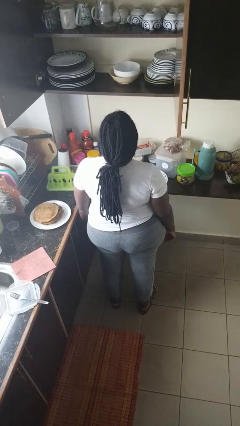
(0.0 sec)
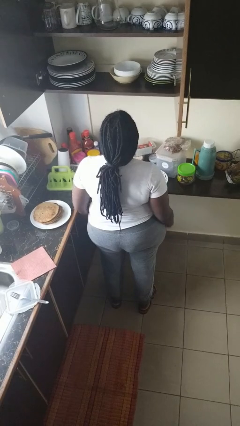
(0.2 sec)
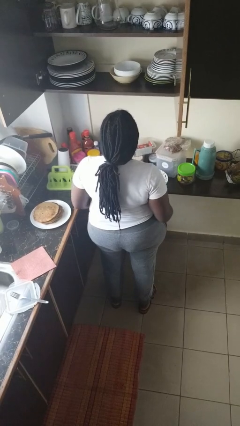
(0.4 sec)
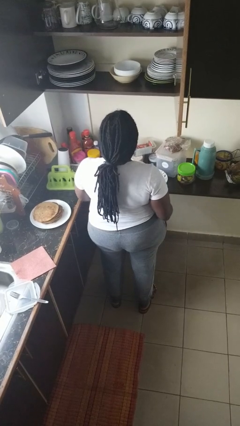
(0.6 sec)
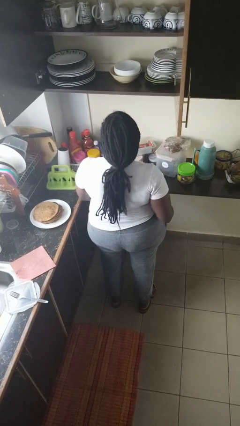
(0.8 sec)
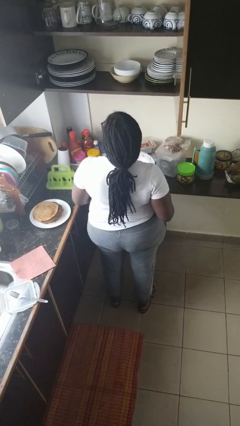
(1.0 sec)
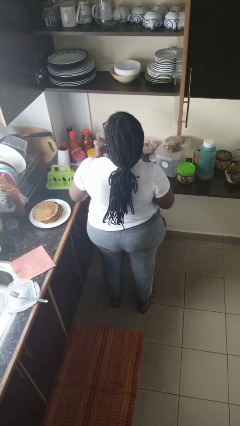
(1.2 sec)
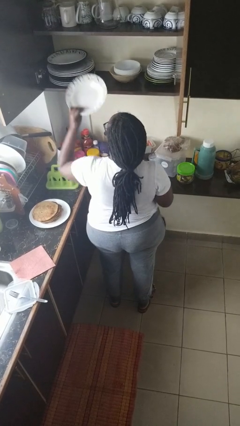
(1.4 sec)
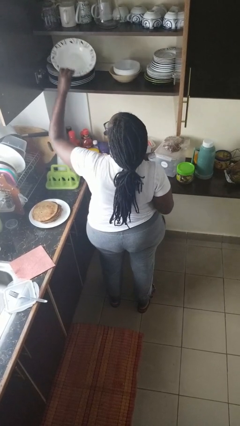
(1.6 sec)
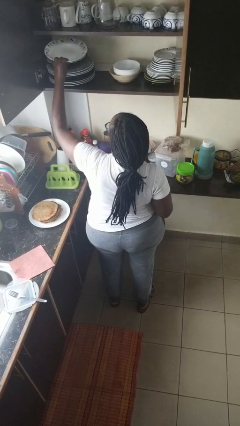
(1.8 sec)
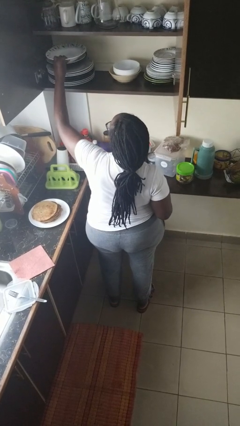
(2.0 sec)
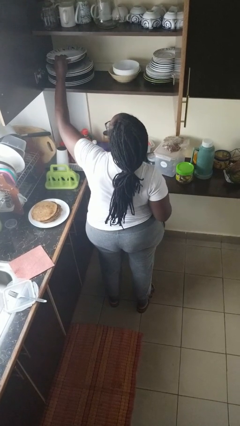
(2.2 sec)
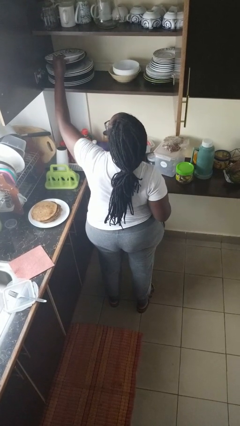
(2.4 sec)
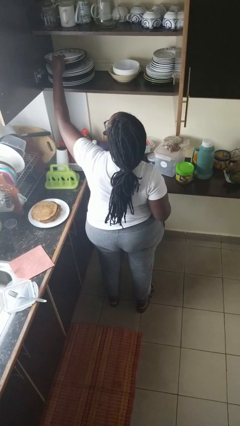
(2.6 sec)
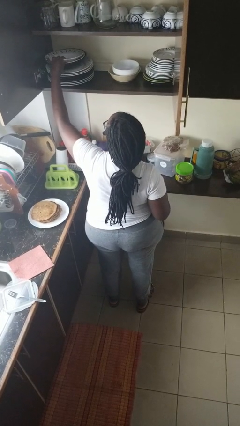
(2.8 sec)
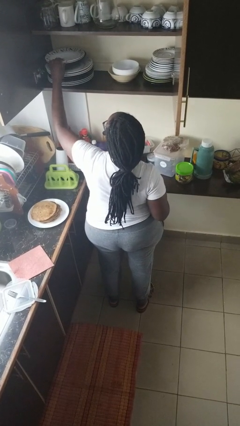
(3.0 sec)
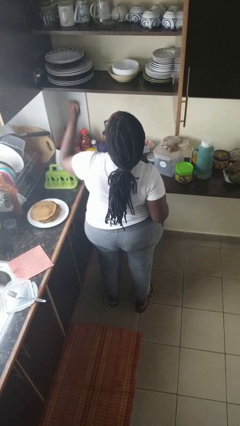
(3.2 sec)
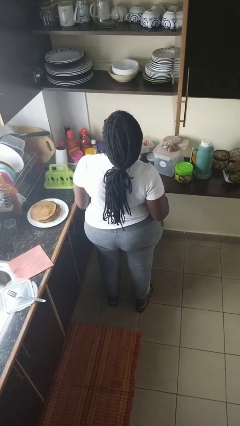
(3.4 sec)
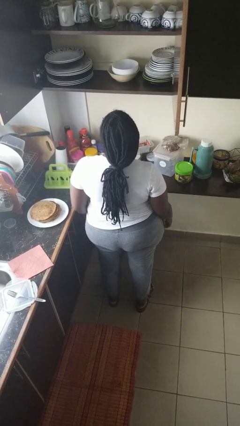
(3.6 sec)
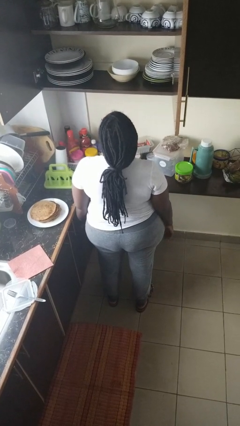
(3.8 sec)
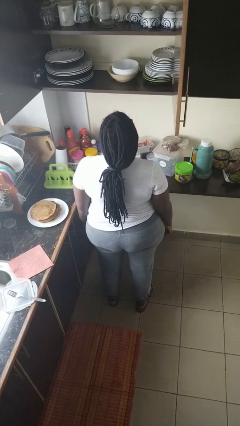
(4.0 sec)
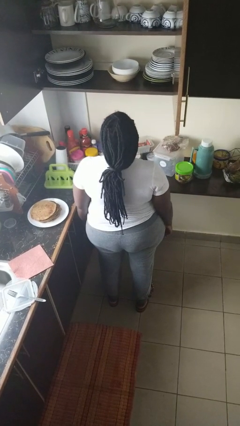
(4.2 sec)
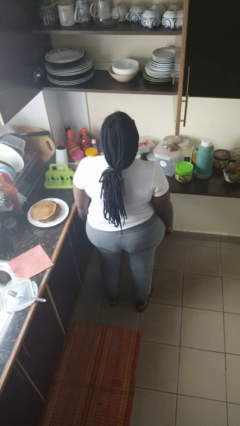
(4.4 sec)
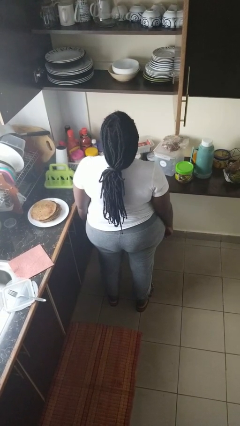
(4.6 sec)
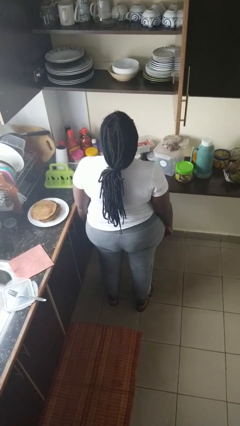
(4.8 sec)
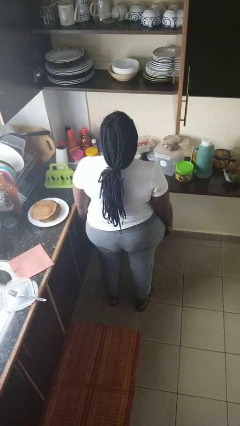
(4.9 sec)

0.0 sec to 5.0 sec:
person puts object in cabinet

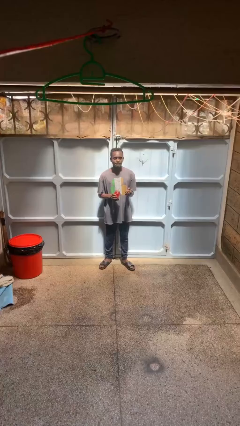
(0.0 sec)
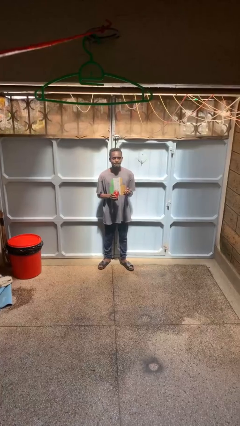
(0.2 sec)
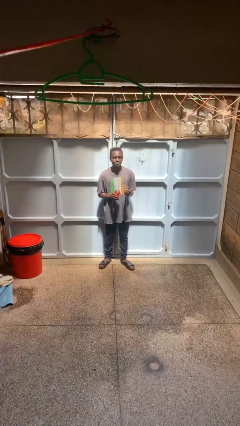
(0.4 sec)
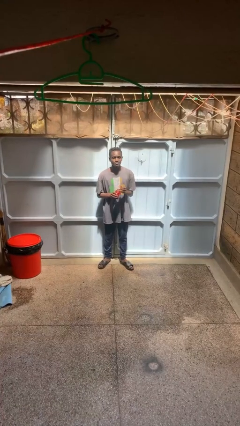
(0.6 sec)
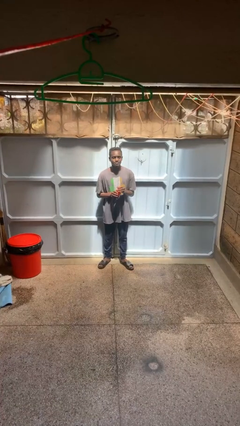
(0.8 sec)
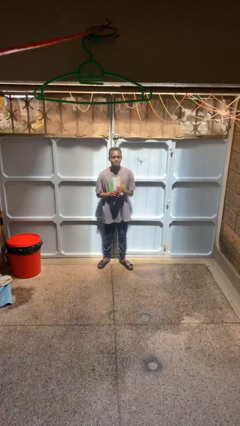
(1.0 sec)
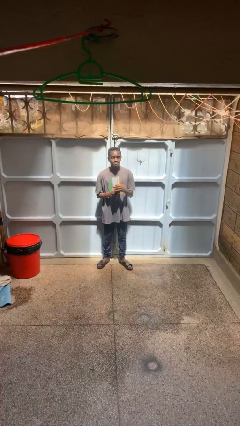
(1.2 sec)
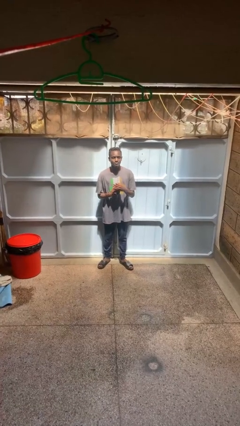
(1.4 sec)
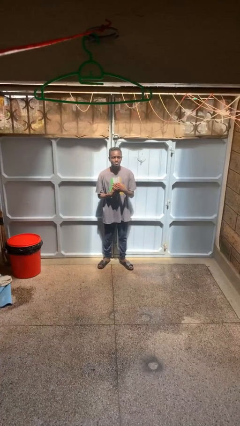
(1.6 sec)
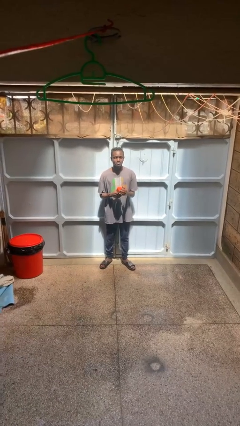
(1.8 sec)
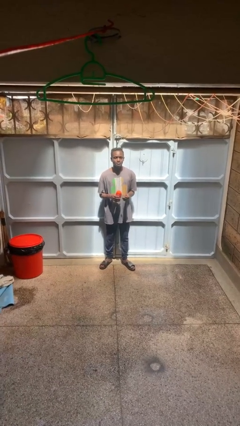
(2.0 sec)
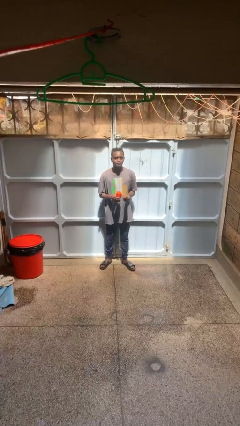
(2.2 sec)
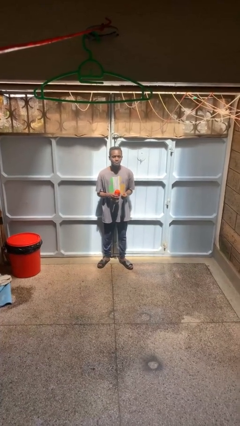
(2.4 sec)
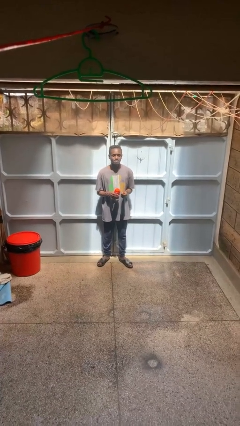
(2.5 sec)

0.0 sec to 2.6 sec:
person closes jar

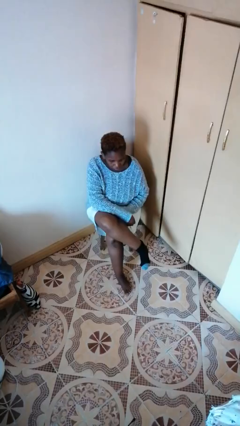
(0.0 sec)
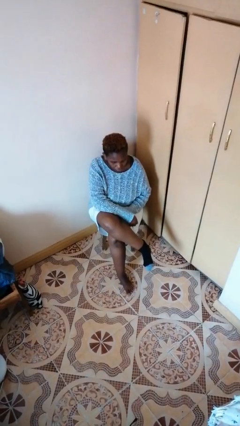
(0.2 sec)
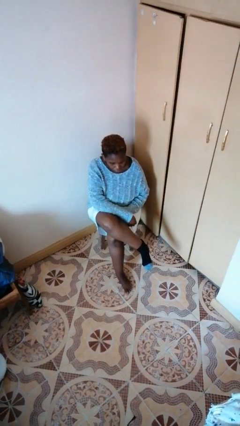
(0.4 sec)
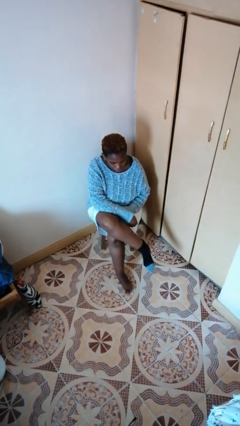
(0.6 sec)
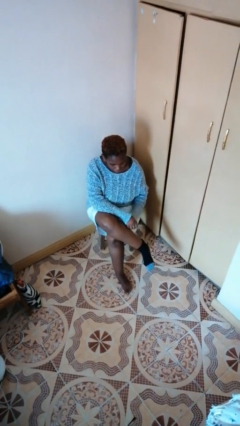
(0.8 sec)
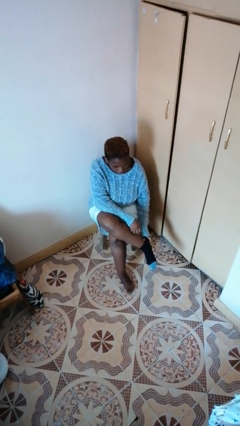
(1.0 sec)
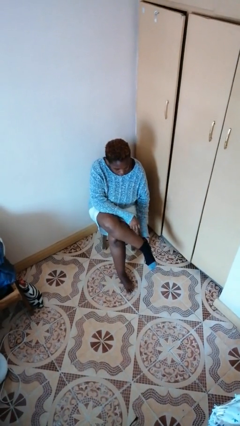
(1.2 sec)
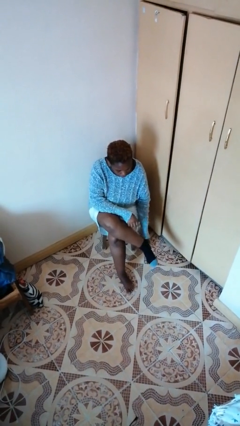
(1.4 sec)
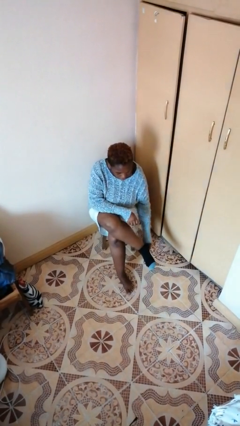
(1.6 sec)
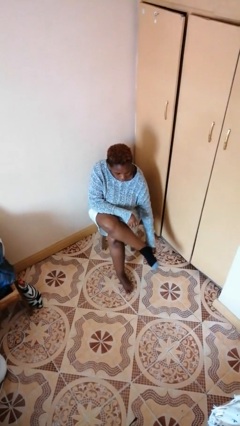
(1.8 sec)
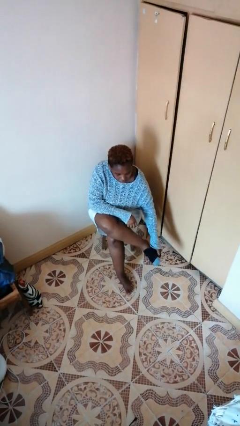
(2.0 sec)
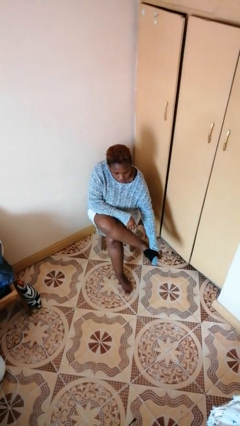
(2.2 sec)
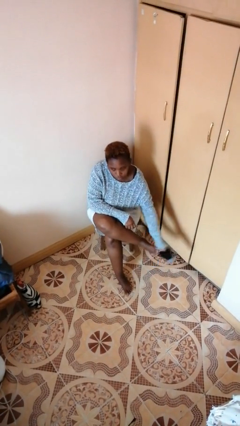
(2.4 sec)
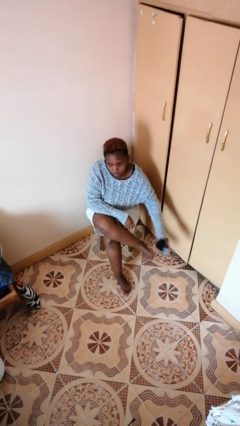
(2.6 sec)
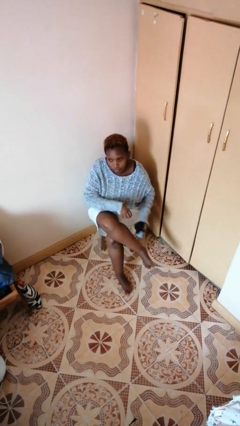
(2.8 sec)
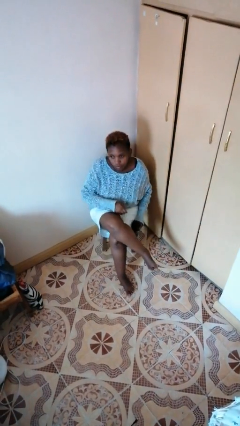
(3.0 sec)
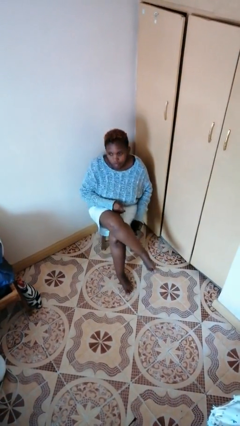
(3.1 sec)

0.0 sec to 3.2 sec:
person takes off socks

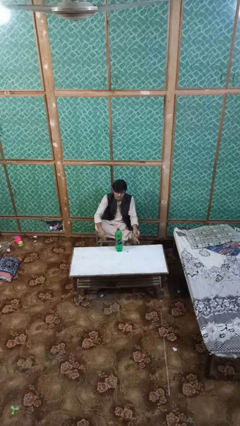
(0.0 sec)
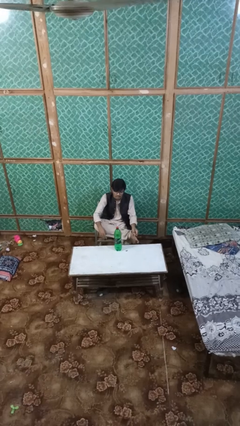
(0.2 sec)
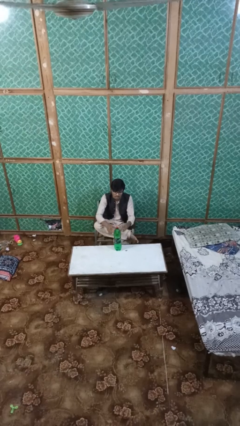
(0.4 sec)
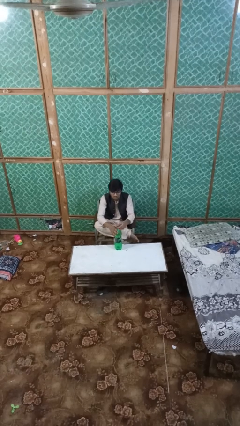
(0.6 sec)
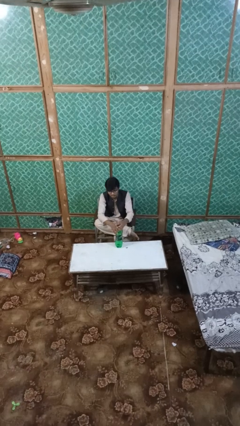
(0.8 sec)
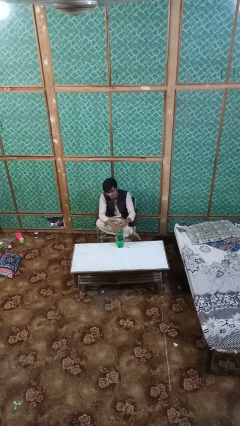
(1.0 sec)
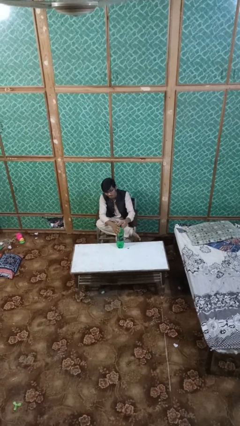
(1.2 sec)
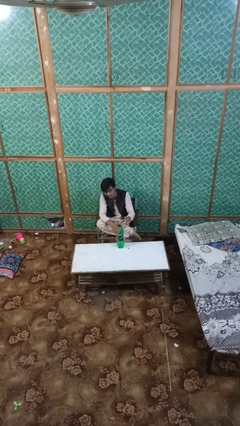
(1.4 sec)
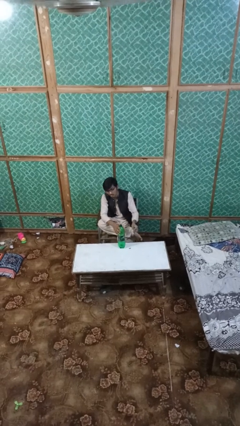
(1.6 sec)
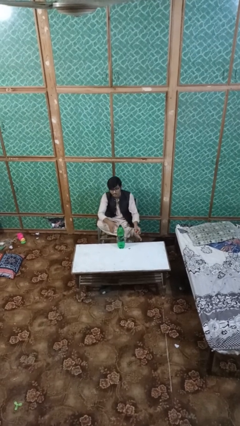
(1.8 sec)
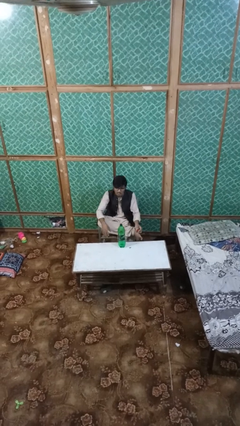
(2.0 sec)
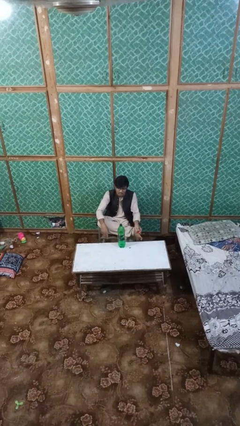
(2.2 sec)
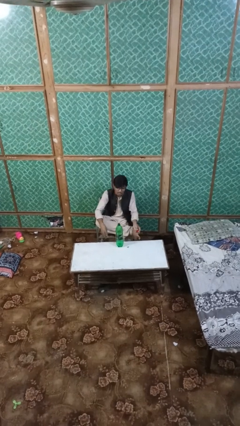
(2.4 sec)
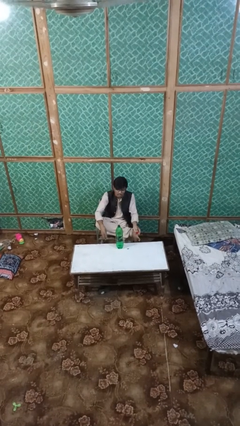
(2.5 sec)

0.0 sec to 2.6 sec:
person unscrews lid from bottle

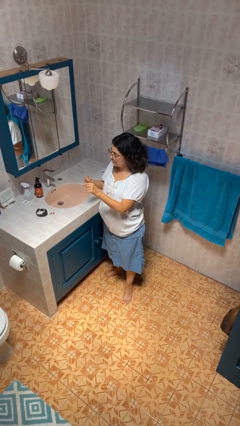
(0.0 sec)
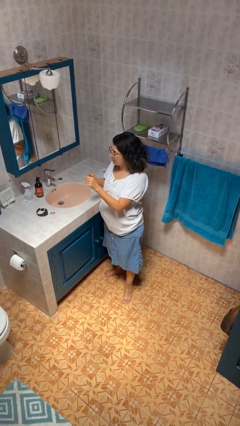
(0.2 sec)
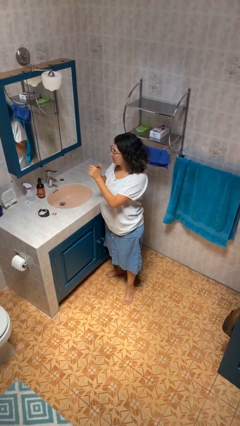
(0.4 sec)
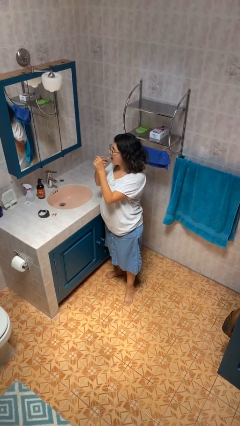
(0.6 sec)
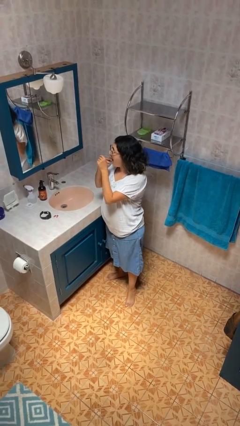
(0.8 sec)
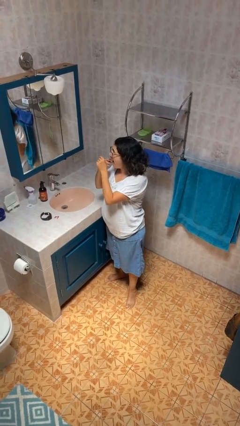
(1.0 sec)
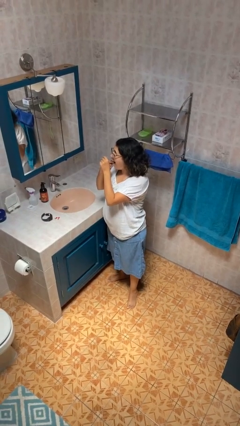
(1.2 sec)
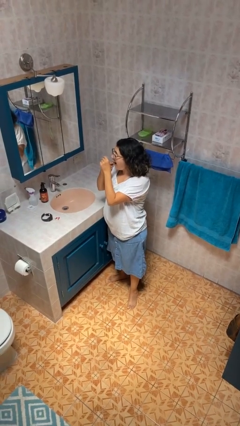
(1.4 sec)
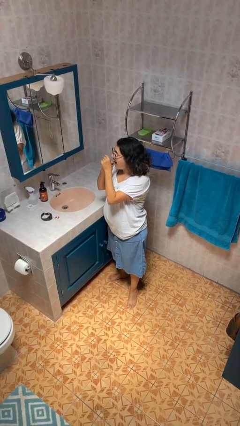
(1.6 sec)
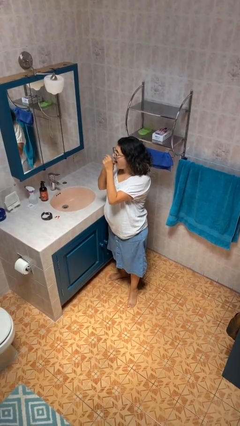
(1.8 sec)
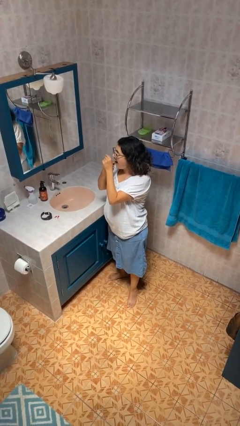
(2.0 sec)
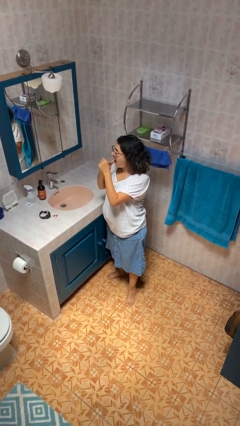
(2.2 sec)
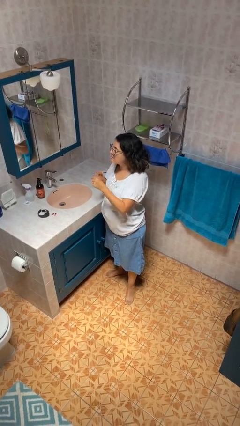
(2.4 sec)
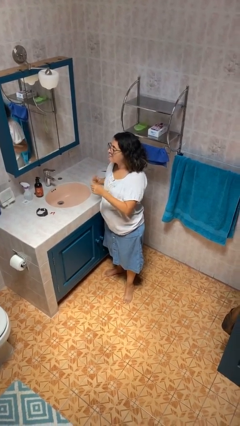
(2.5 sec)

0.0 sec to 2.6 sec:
person flosses

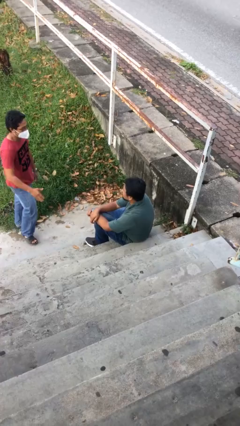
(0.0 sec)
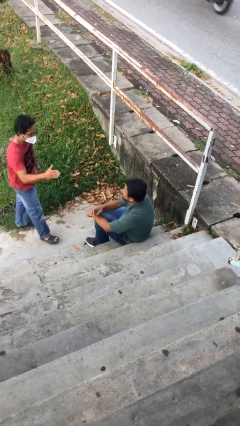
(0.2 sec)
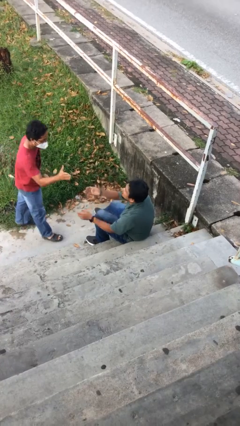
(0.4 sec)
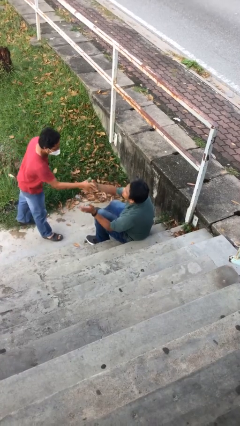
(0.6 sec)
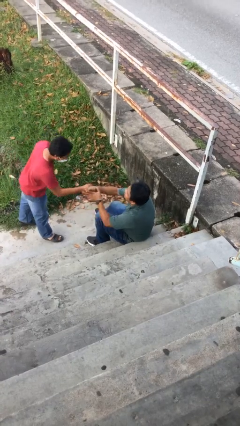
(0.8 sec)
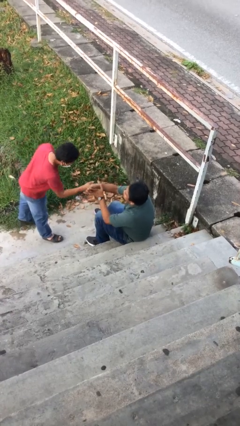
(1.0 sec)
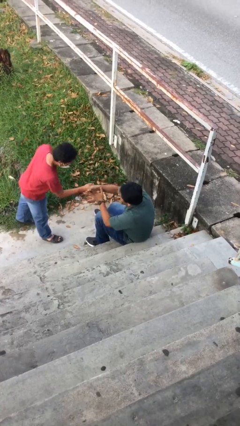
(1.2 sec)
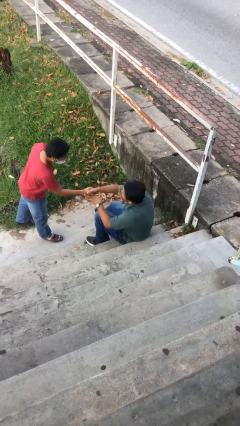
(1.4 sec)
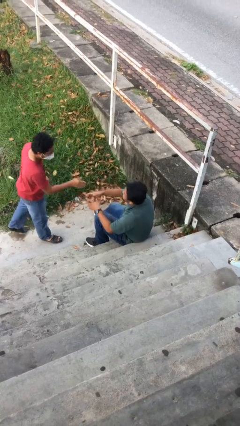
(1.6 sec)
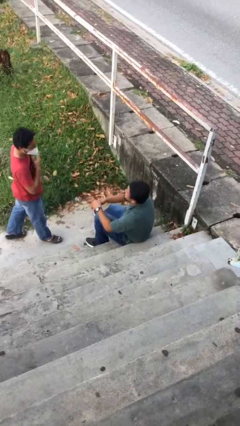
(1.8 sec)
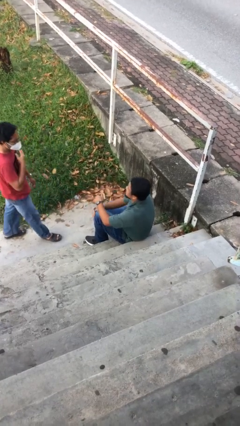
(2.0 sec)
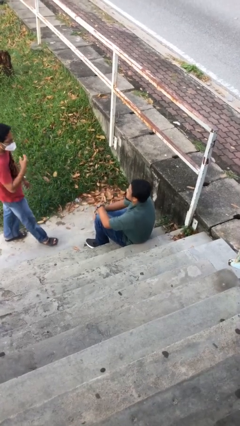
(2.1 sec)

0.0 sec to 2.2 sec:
person shakes hand
